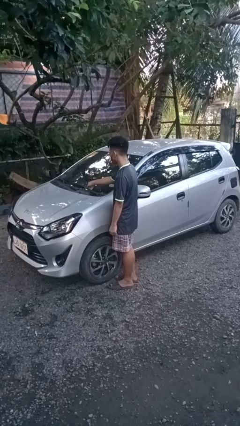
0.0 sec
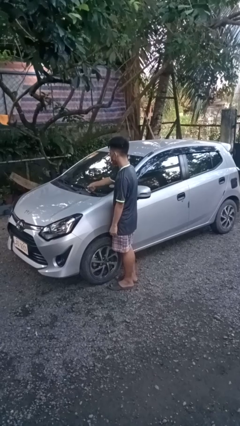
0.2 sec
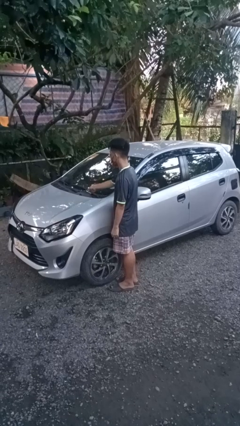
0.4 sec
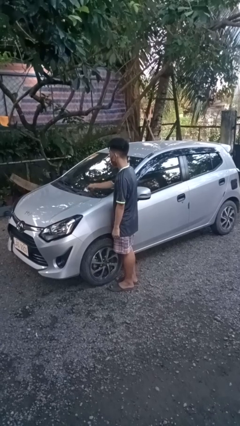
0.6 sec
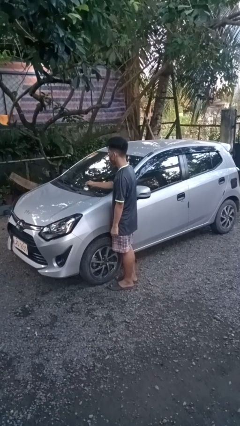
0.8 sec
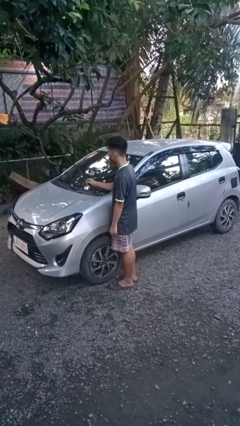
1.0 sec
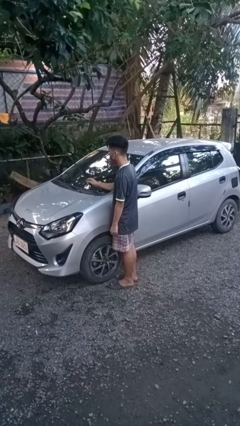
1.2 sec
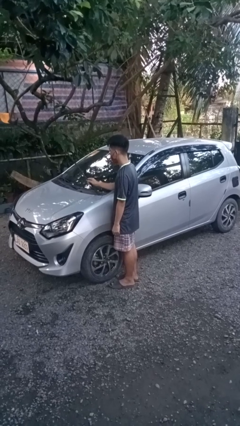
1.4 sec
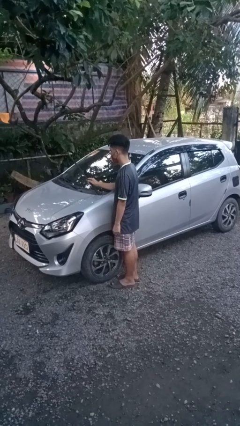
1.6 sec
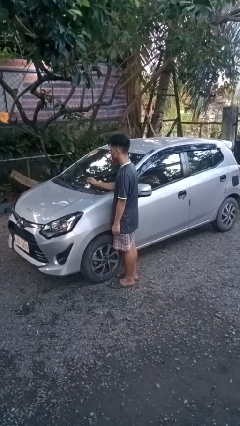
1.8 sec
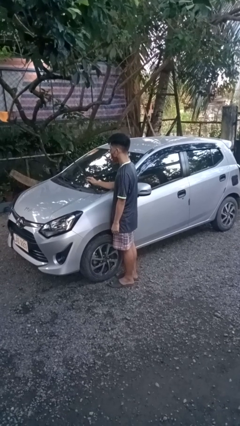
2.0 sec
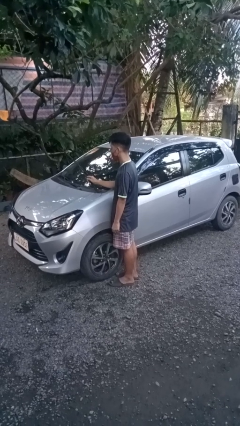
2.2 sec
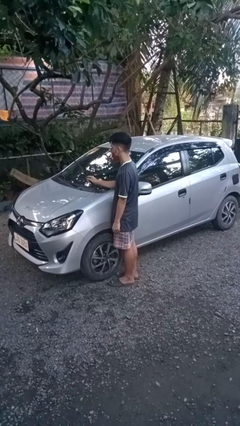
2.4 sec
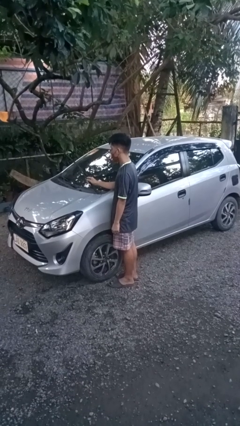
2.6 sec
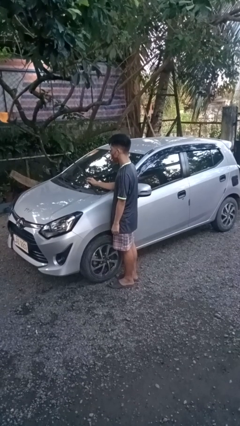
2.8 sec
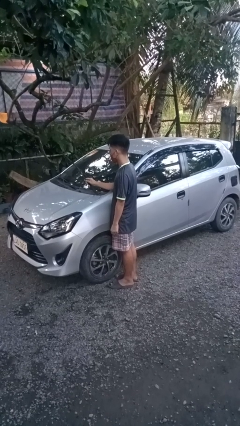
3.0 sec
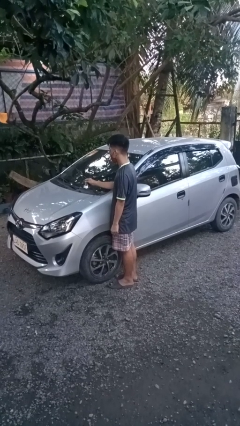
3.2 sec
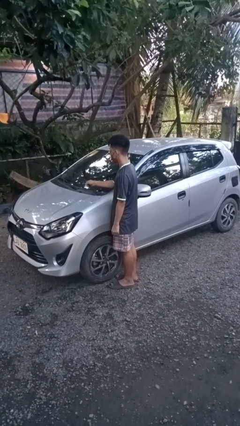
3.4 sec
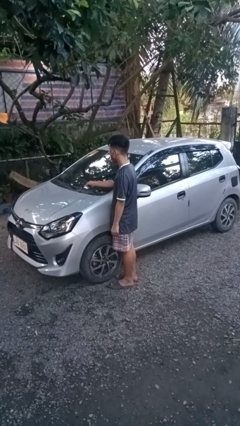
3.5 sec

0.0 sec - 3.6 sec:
person flips up car wipers

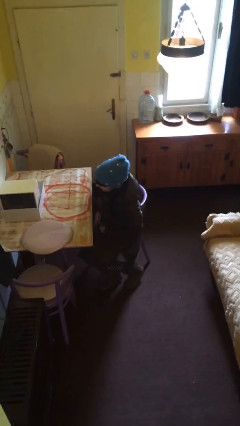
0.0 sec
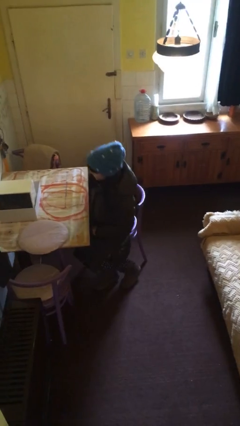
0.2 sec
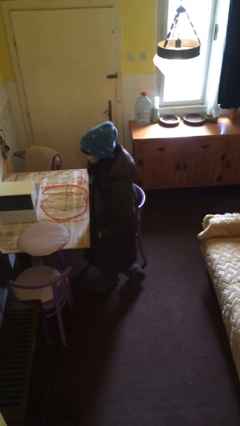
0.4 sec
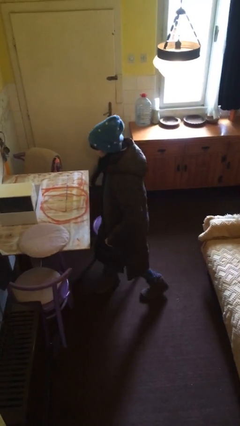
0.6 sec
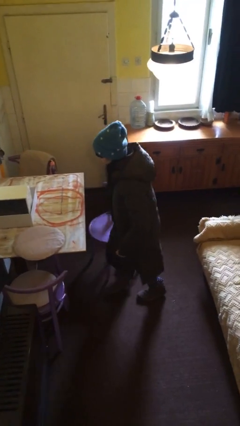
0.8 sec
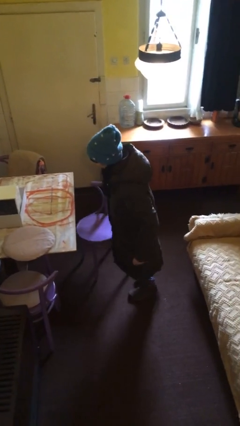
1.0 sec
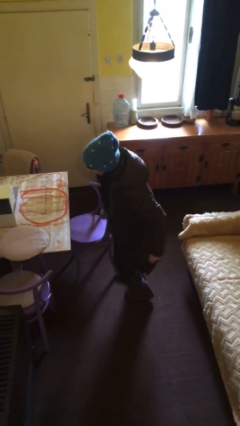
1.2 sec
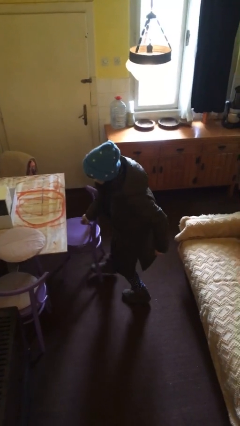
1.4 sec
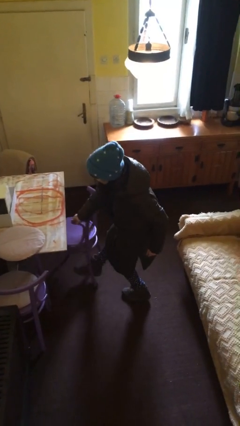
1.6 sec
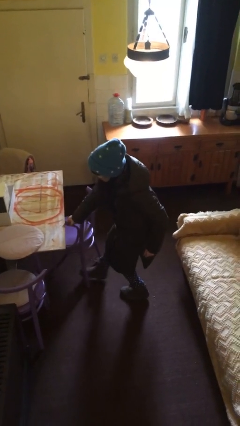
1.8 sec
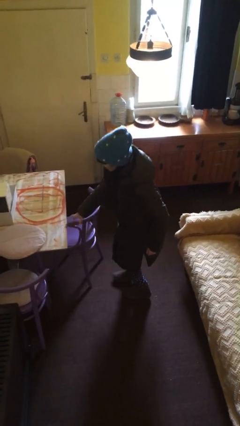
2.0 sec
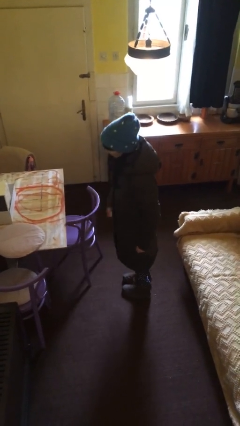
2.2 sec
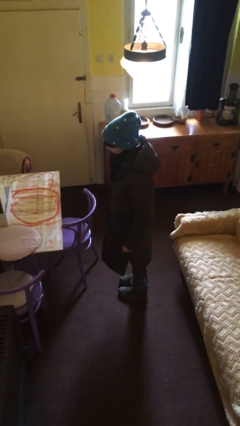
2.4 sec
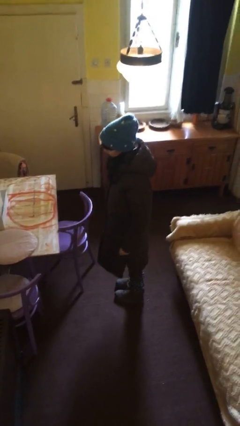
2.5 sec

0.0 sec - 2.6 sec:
person stands up

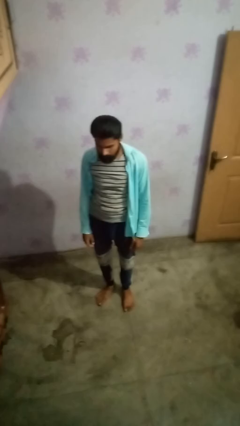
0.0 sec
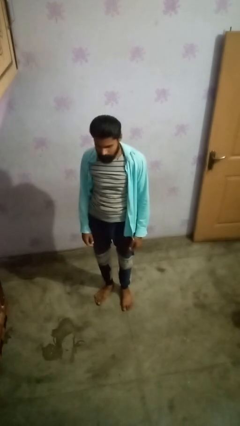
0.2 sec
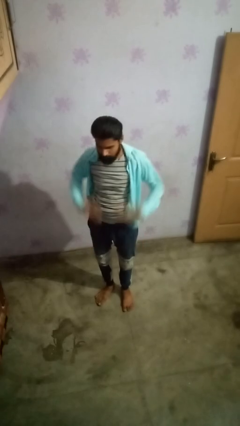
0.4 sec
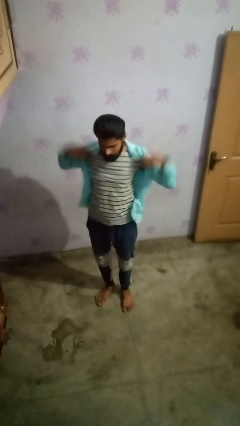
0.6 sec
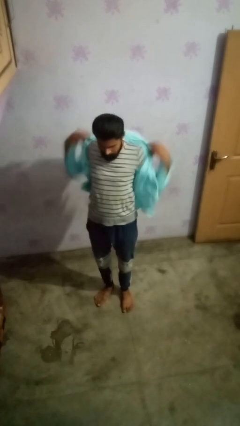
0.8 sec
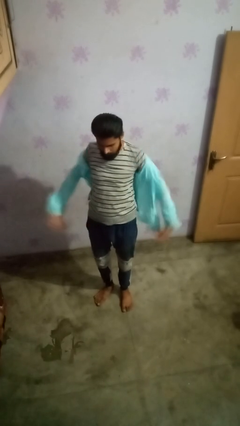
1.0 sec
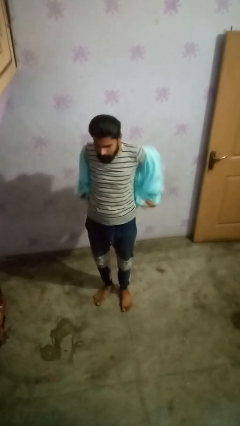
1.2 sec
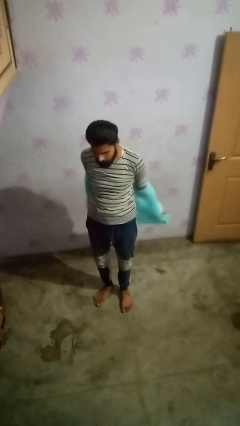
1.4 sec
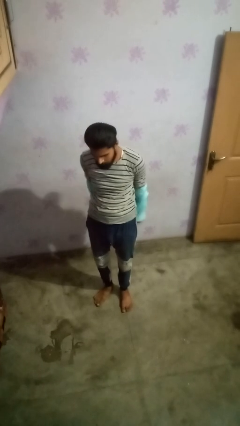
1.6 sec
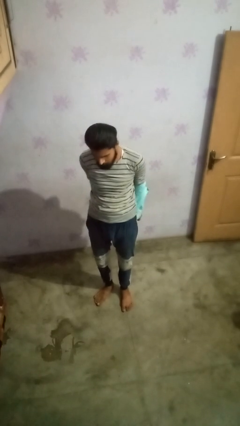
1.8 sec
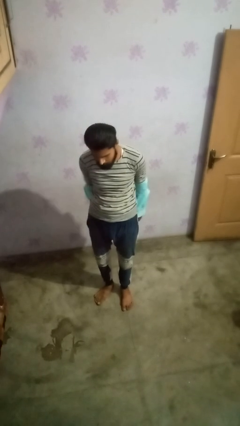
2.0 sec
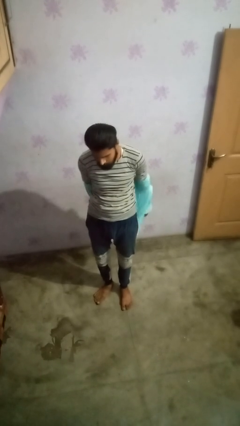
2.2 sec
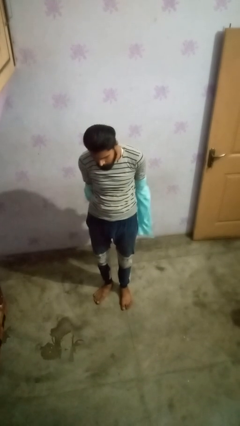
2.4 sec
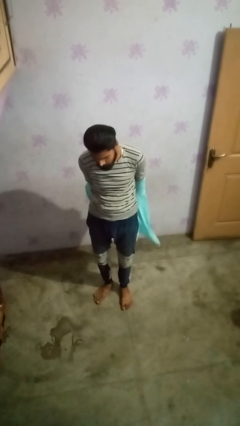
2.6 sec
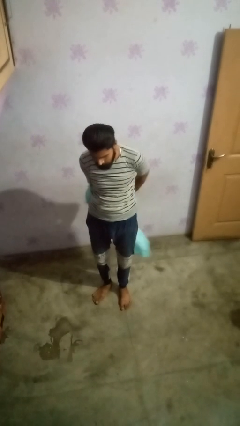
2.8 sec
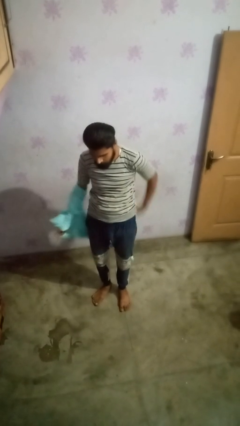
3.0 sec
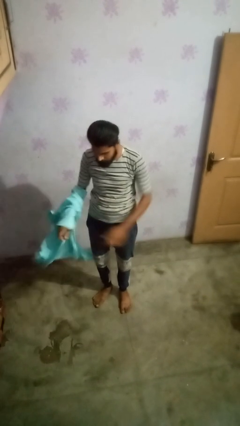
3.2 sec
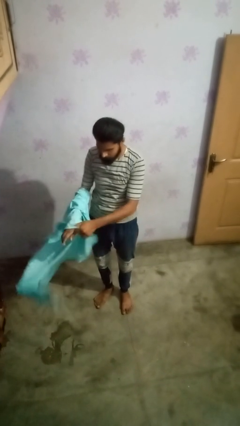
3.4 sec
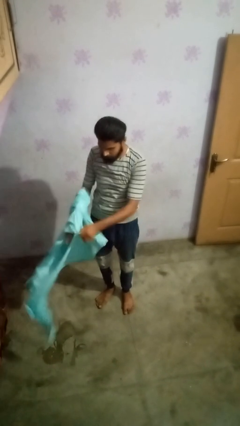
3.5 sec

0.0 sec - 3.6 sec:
person takes off shirt

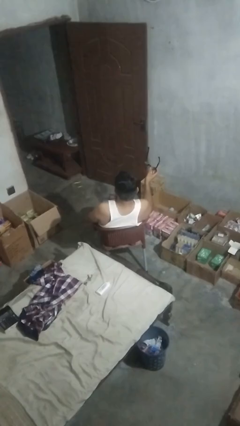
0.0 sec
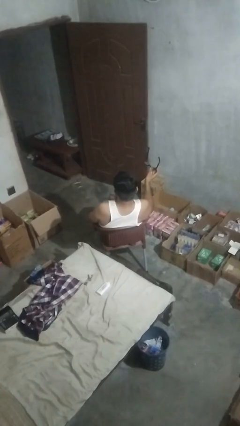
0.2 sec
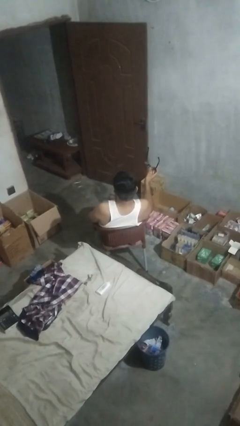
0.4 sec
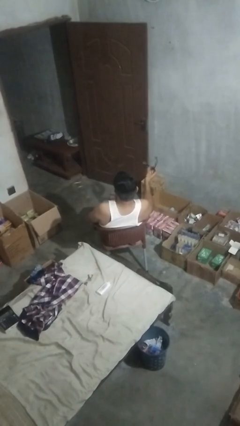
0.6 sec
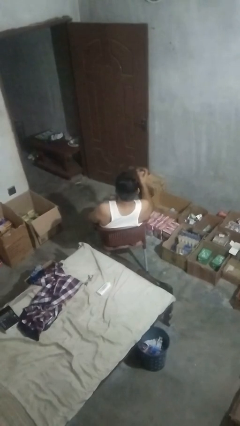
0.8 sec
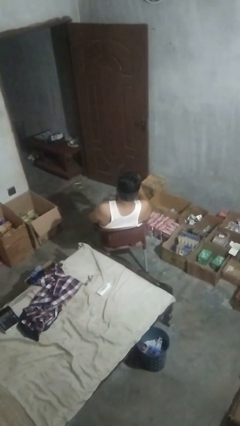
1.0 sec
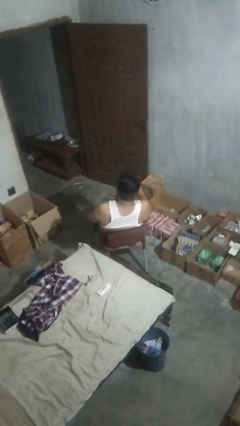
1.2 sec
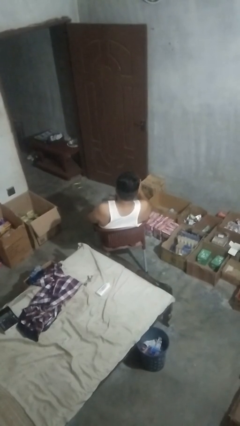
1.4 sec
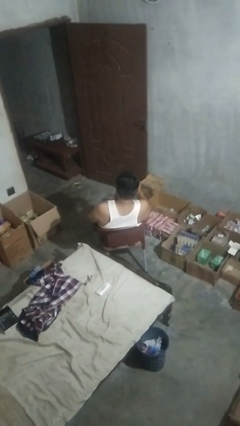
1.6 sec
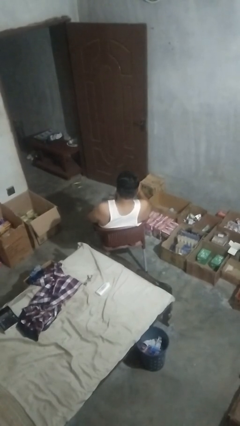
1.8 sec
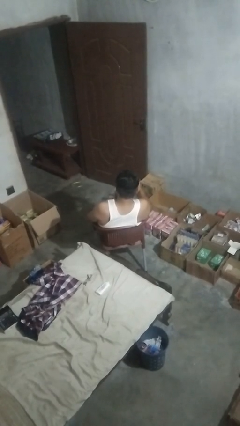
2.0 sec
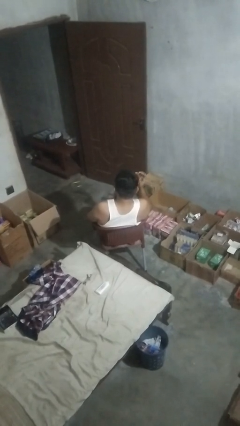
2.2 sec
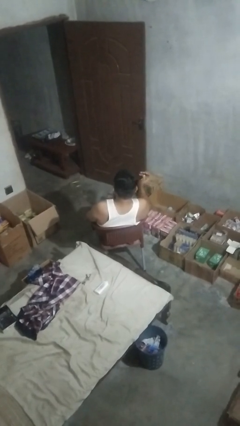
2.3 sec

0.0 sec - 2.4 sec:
person puts on sunglasses

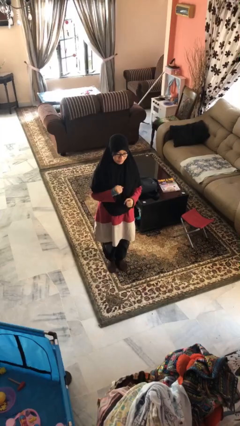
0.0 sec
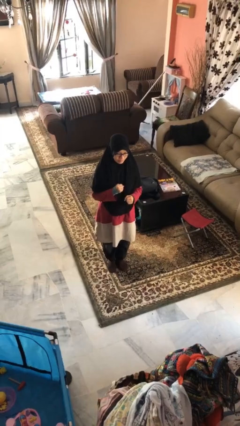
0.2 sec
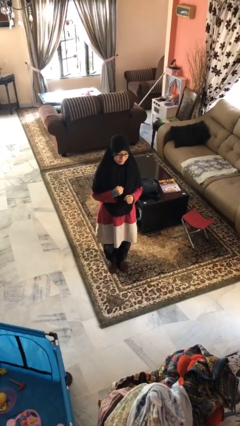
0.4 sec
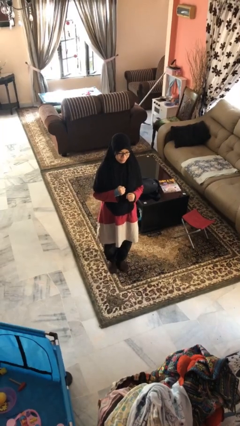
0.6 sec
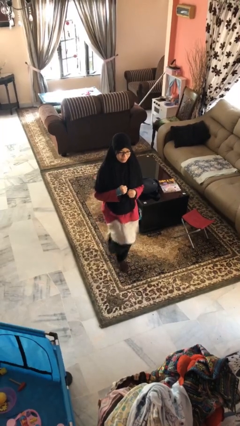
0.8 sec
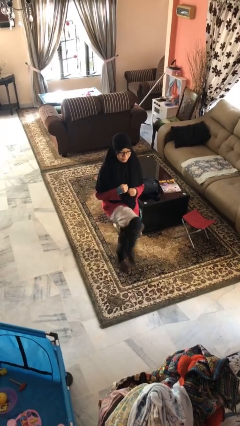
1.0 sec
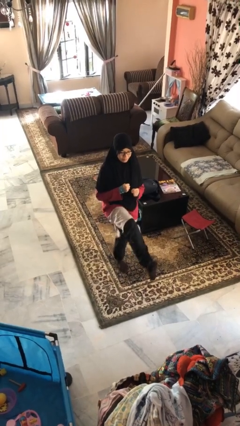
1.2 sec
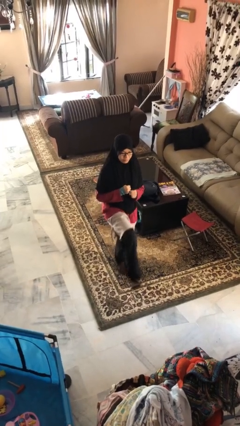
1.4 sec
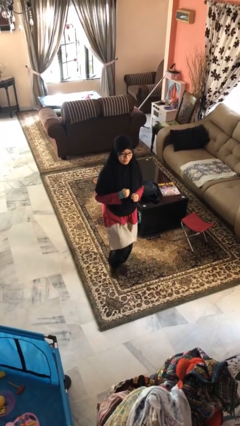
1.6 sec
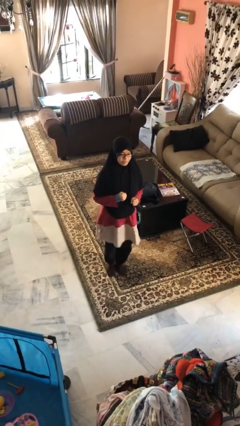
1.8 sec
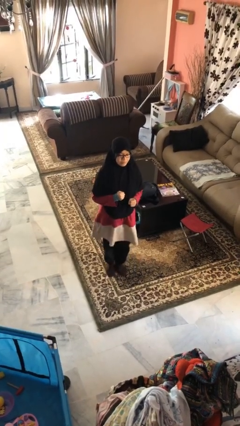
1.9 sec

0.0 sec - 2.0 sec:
person karate kicks

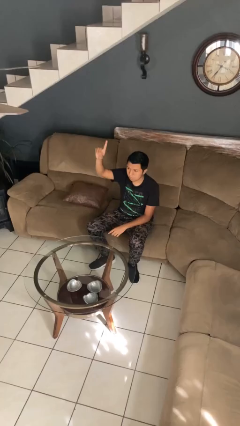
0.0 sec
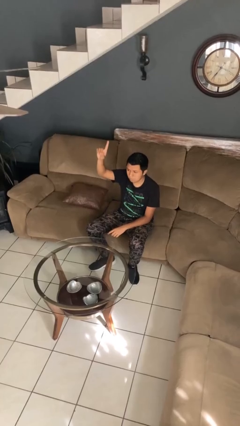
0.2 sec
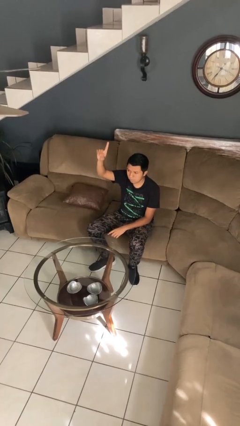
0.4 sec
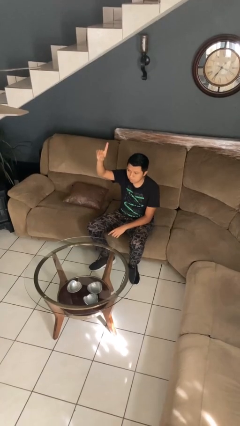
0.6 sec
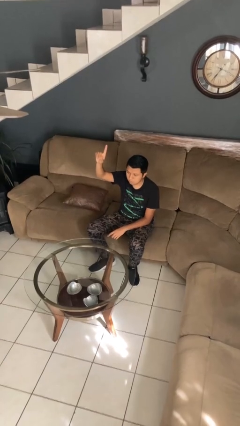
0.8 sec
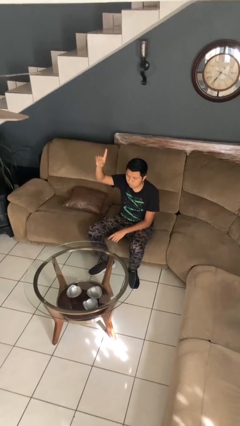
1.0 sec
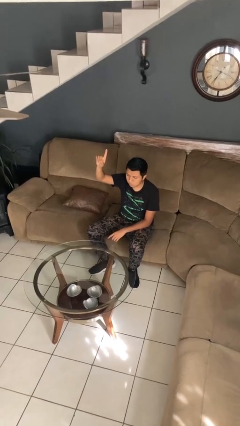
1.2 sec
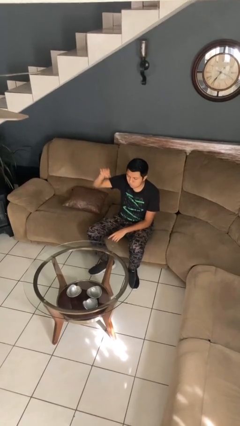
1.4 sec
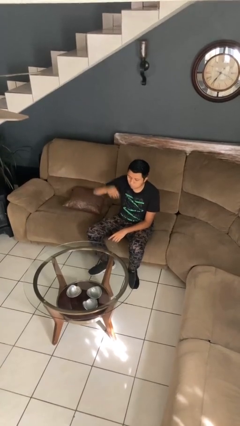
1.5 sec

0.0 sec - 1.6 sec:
person gestures number one

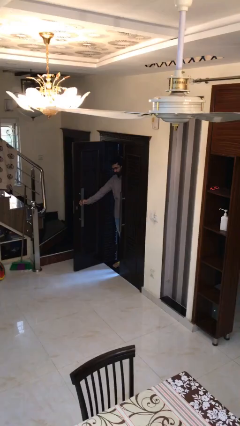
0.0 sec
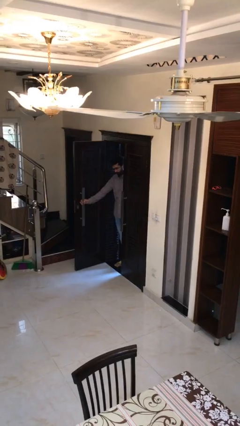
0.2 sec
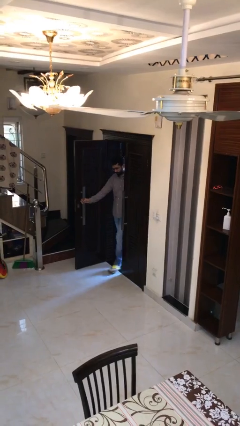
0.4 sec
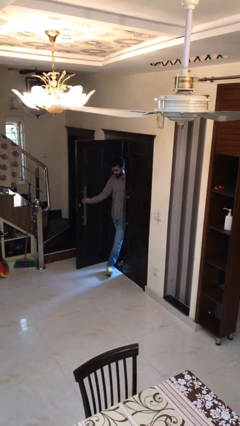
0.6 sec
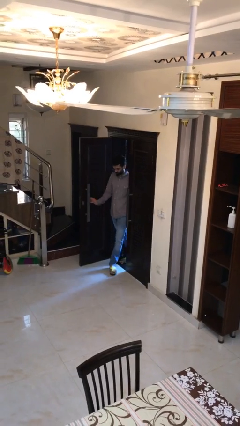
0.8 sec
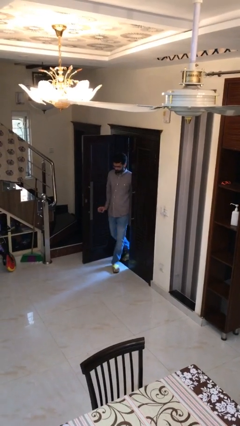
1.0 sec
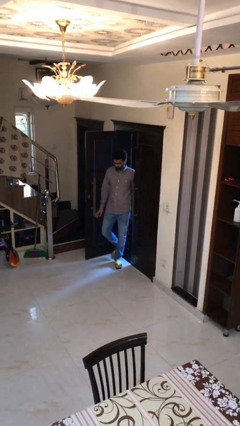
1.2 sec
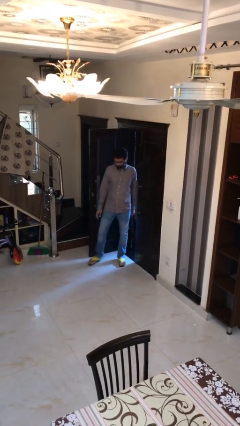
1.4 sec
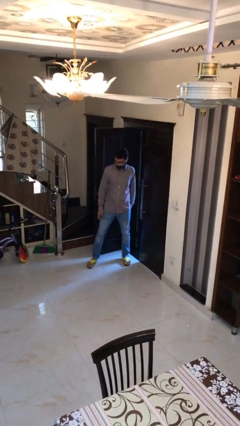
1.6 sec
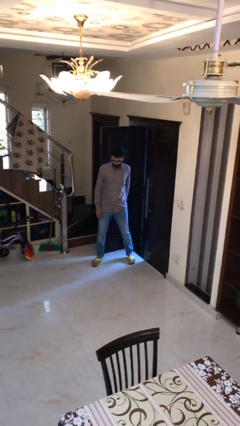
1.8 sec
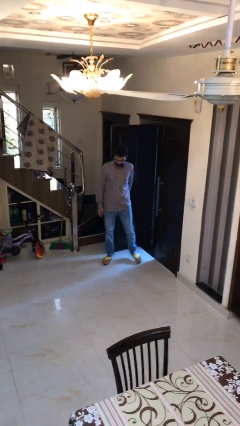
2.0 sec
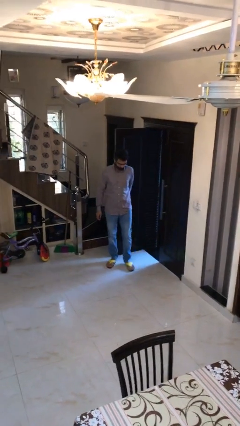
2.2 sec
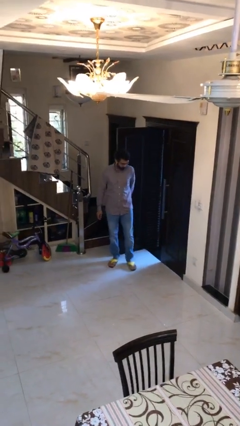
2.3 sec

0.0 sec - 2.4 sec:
person enters scene through structure
